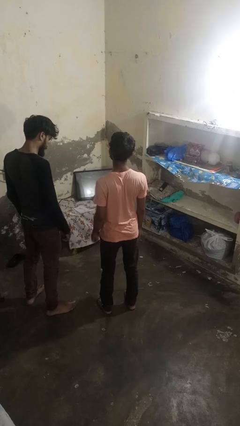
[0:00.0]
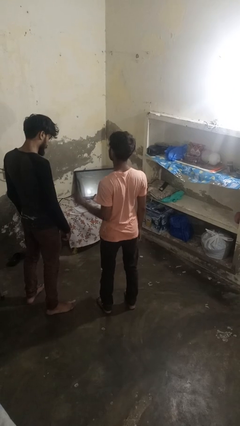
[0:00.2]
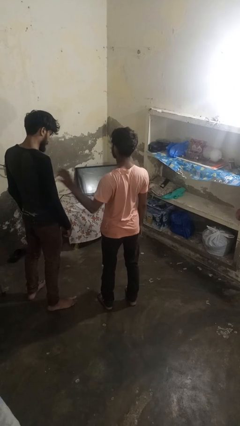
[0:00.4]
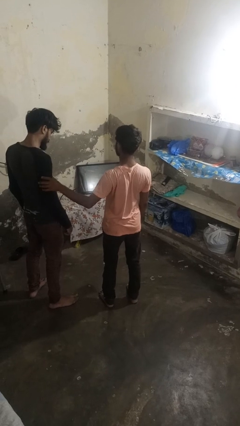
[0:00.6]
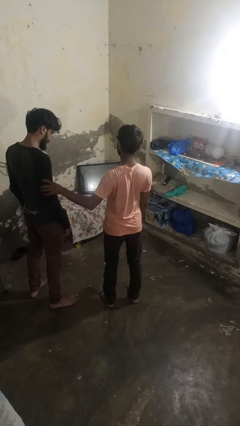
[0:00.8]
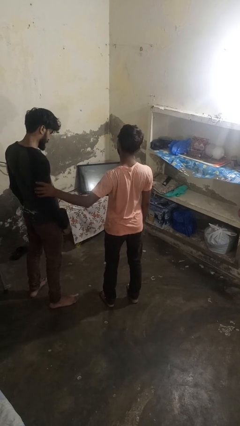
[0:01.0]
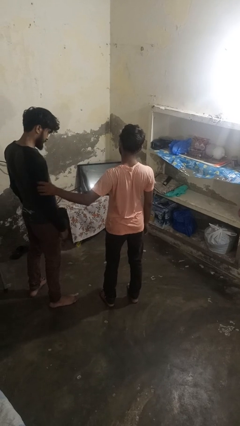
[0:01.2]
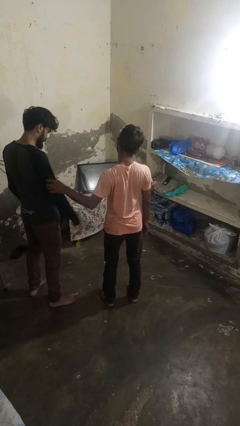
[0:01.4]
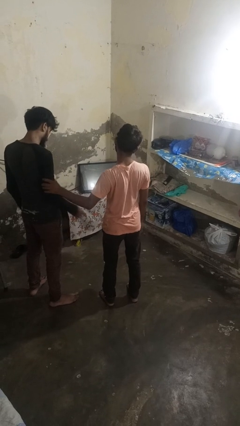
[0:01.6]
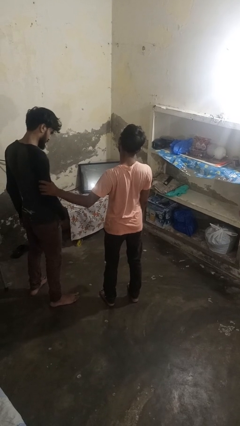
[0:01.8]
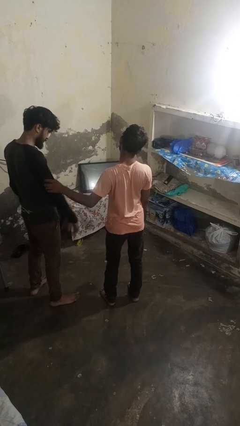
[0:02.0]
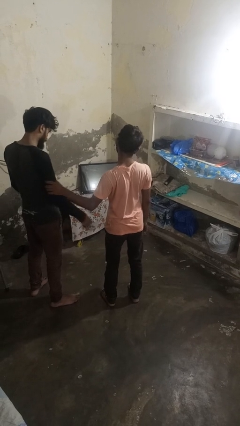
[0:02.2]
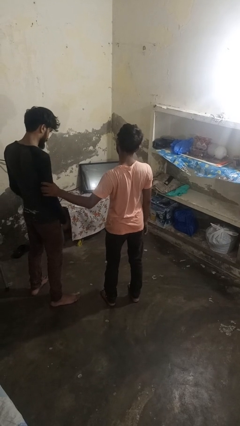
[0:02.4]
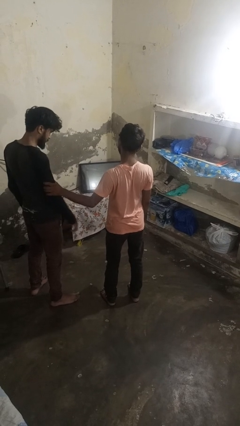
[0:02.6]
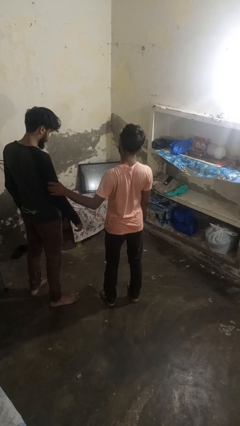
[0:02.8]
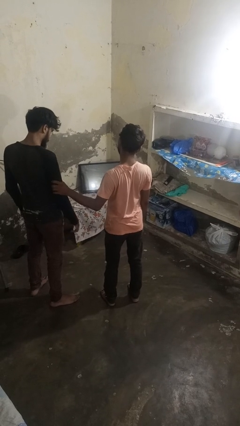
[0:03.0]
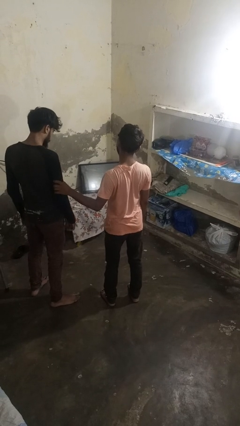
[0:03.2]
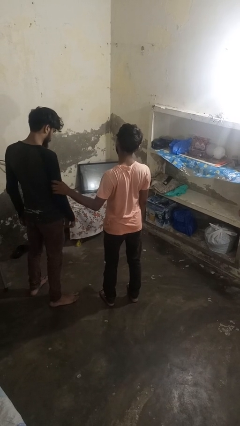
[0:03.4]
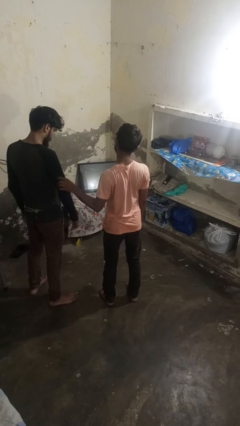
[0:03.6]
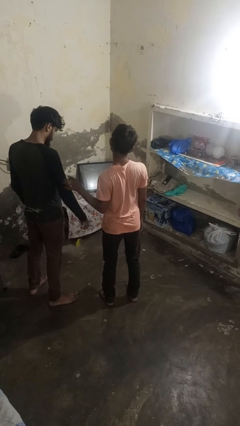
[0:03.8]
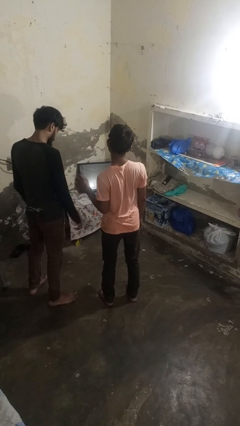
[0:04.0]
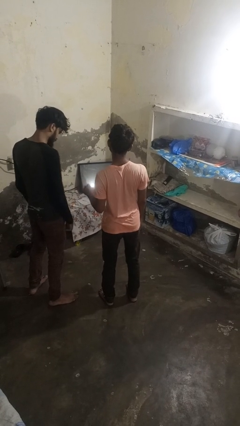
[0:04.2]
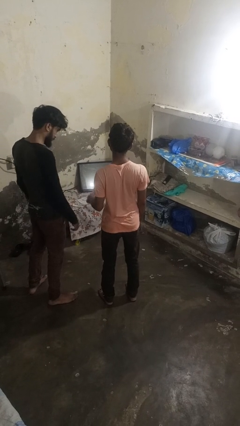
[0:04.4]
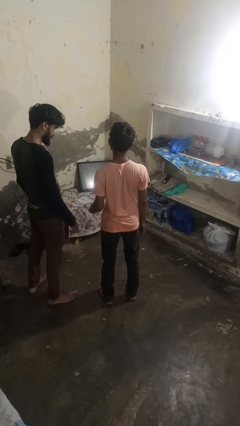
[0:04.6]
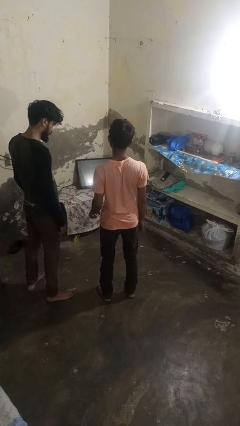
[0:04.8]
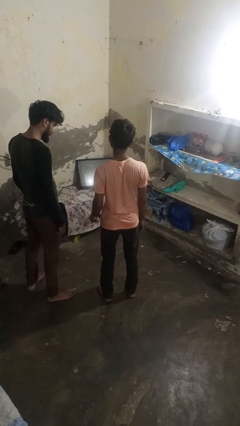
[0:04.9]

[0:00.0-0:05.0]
person grabs person by bicep

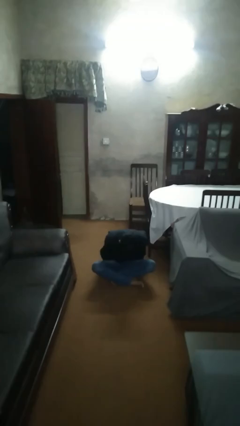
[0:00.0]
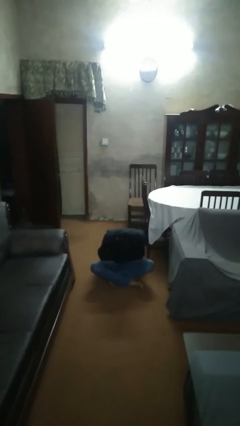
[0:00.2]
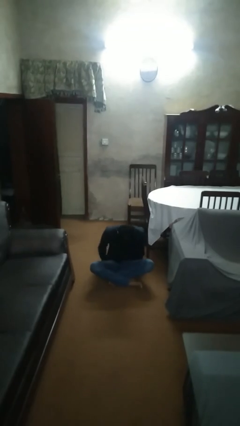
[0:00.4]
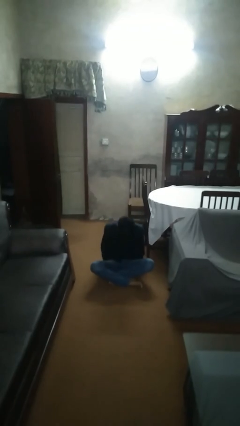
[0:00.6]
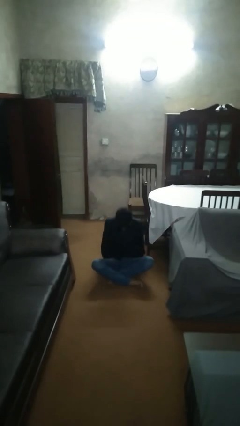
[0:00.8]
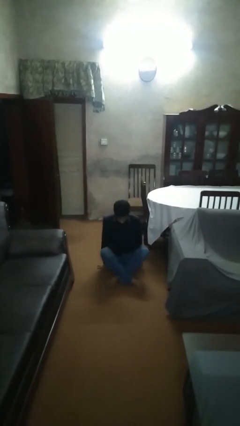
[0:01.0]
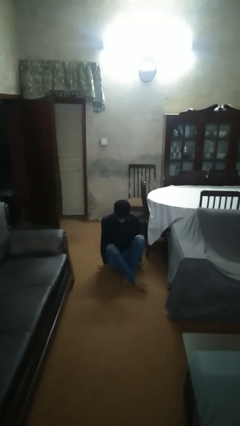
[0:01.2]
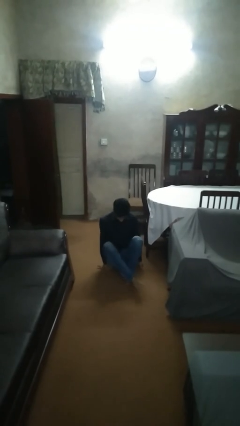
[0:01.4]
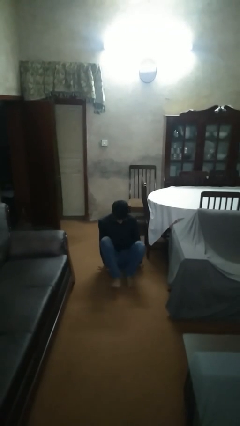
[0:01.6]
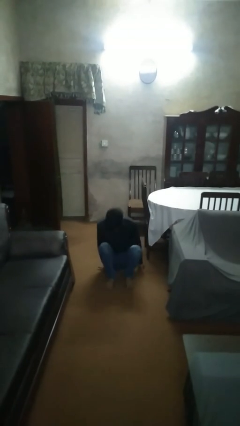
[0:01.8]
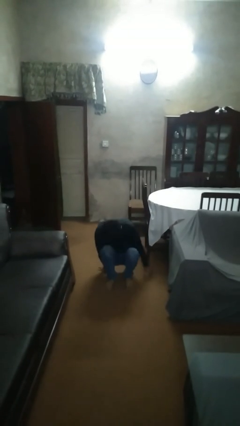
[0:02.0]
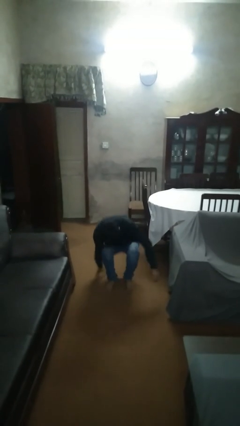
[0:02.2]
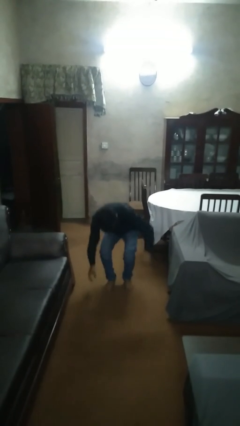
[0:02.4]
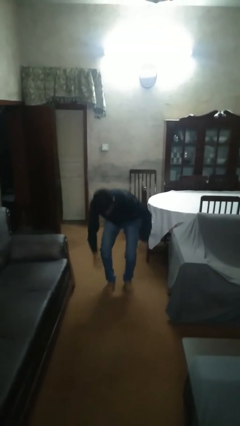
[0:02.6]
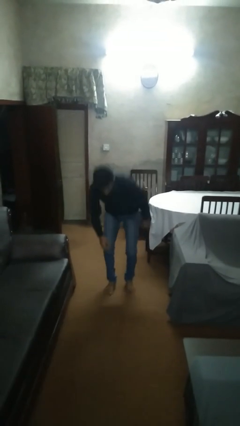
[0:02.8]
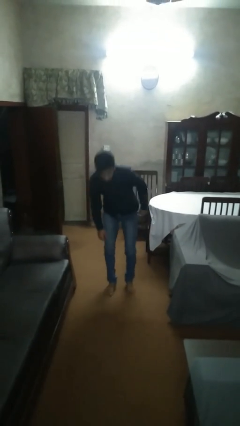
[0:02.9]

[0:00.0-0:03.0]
person stands up from floor

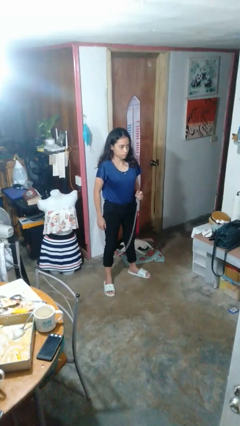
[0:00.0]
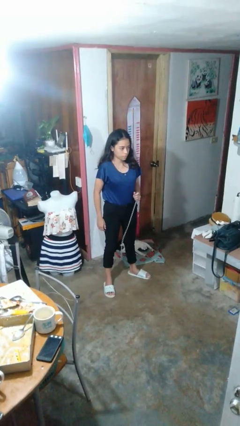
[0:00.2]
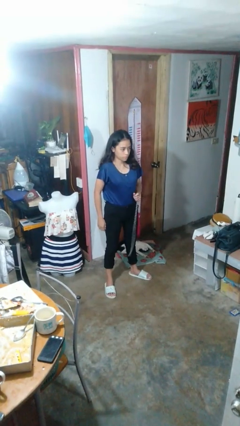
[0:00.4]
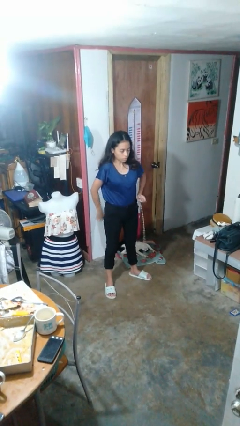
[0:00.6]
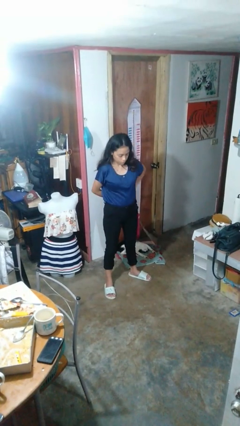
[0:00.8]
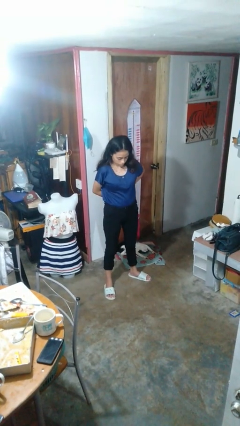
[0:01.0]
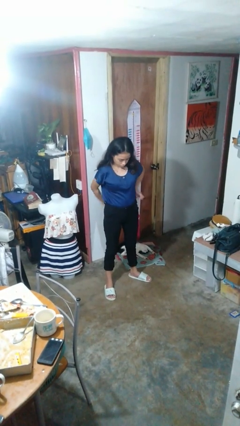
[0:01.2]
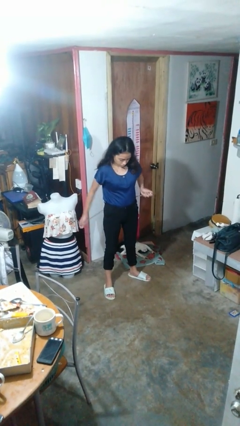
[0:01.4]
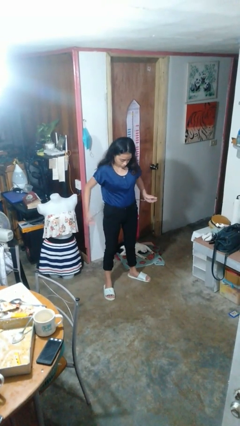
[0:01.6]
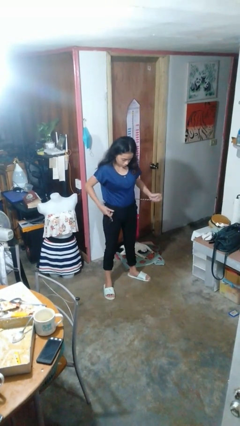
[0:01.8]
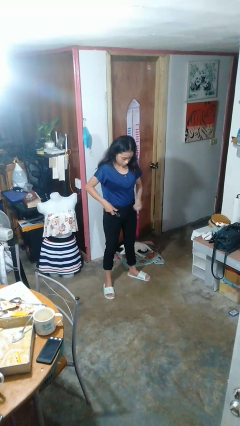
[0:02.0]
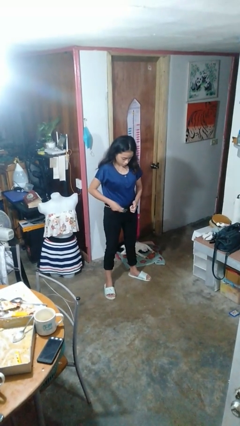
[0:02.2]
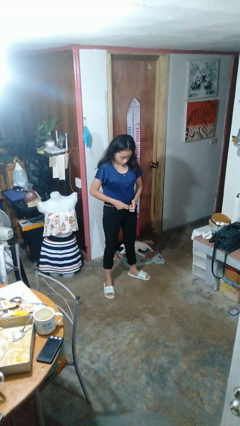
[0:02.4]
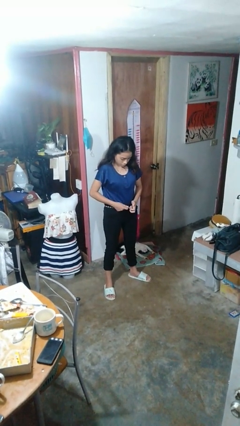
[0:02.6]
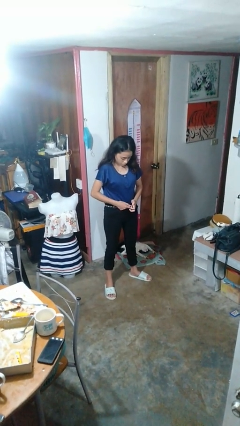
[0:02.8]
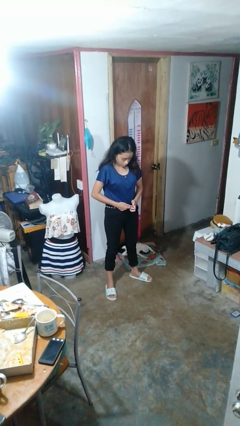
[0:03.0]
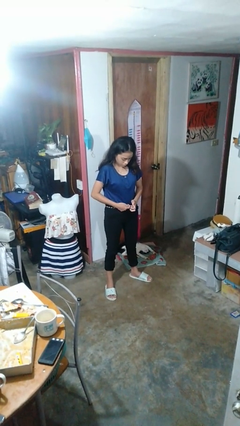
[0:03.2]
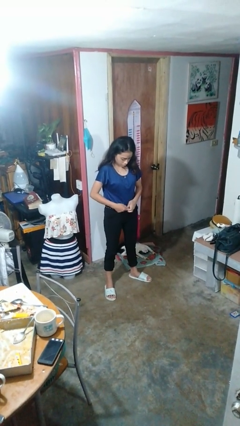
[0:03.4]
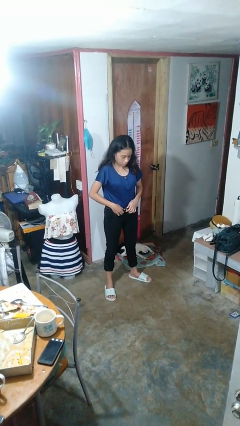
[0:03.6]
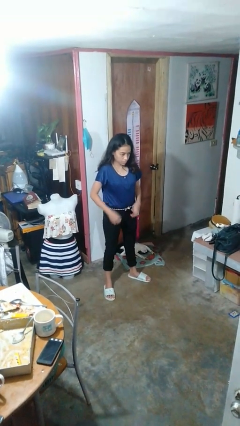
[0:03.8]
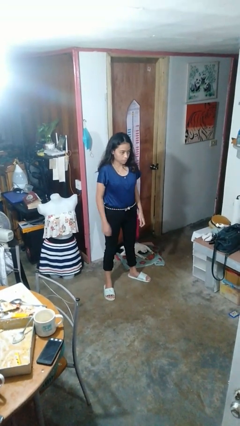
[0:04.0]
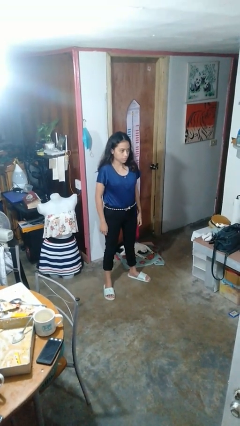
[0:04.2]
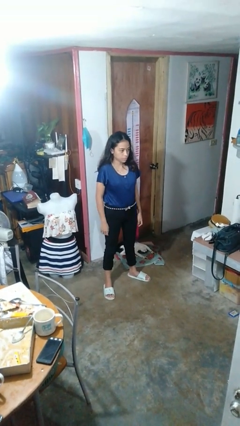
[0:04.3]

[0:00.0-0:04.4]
person puts on belt

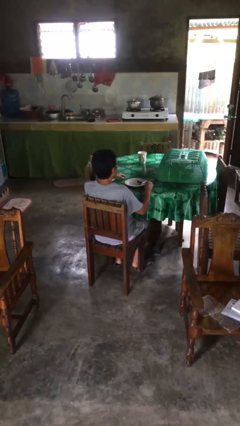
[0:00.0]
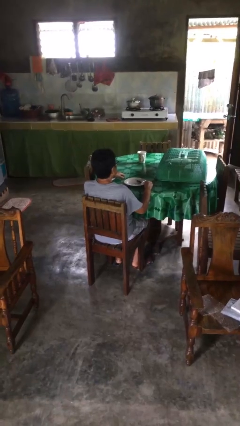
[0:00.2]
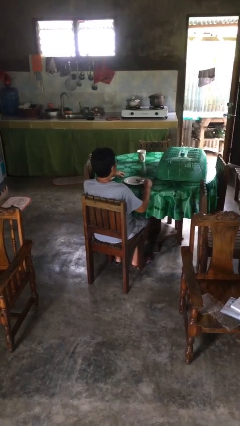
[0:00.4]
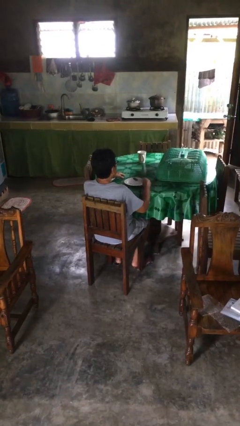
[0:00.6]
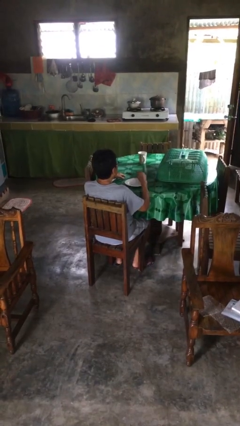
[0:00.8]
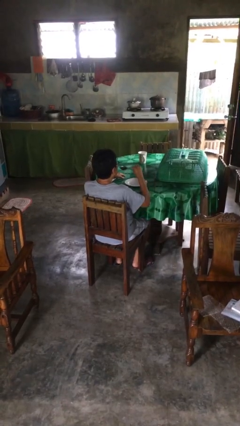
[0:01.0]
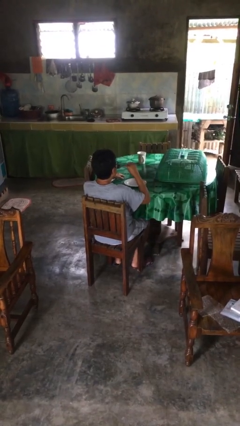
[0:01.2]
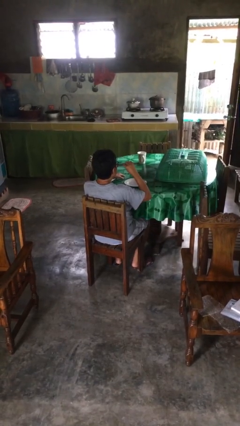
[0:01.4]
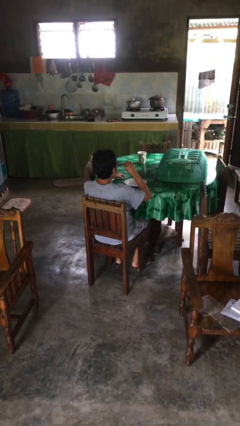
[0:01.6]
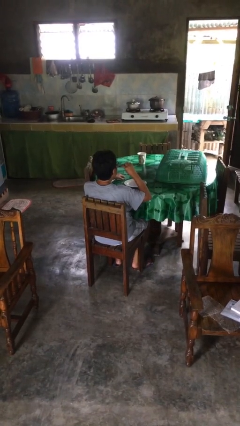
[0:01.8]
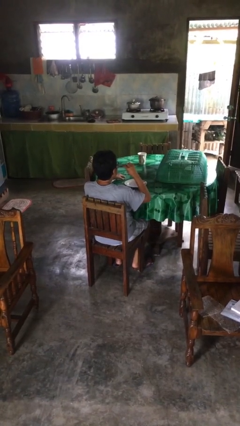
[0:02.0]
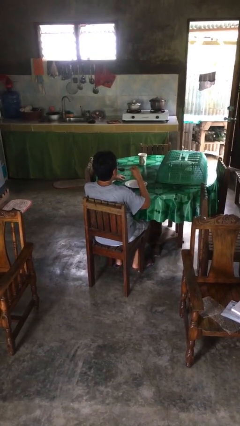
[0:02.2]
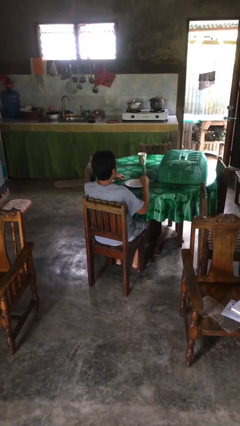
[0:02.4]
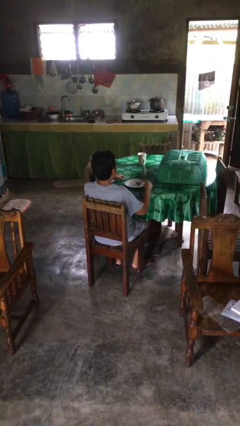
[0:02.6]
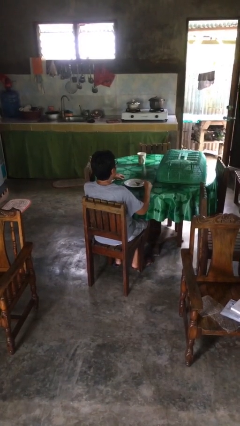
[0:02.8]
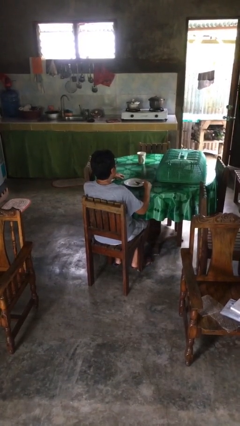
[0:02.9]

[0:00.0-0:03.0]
person eats with utensil

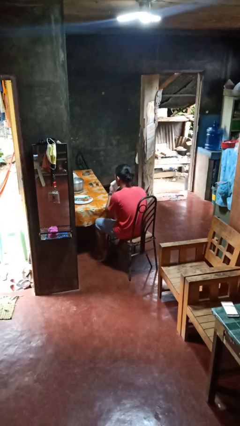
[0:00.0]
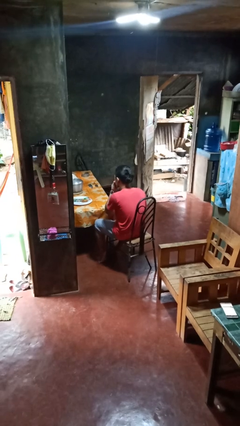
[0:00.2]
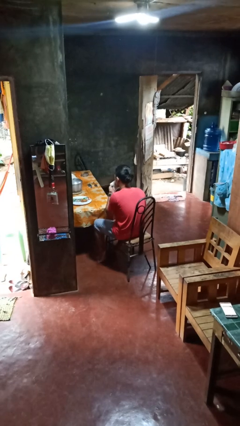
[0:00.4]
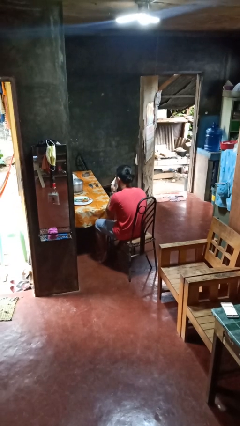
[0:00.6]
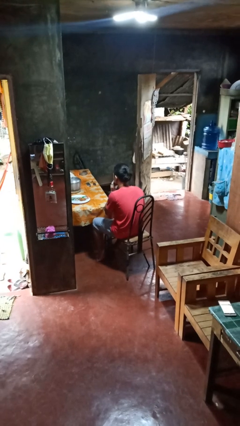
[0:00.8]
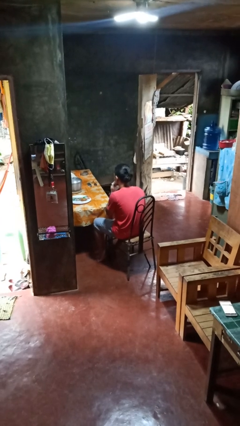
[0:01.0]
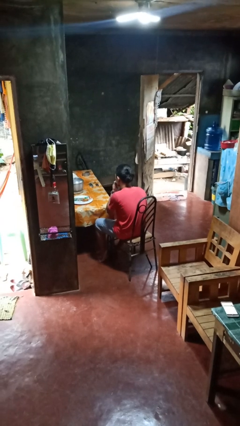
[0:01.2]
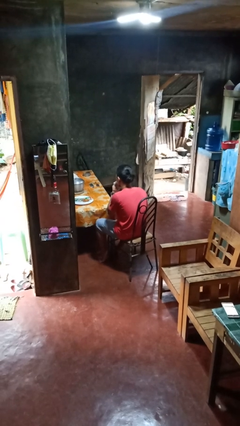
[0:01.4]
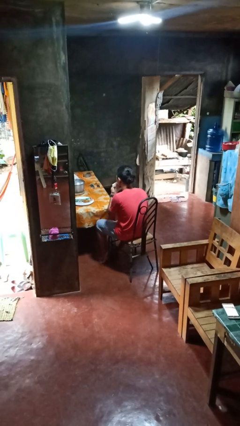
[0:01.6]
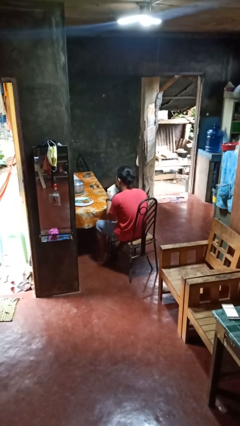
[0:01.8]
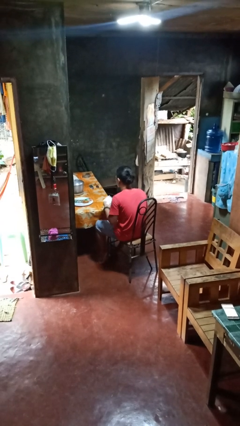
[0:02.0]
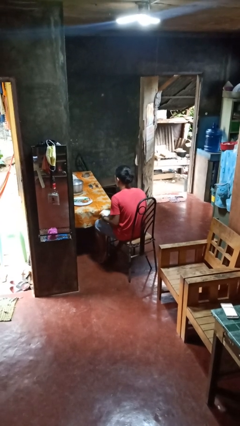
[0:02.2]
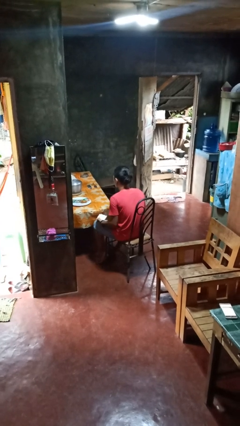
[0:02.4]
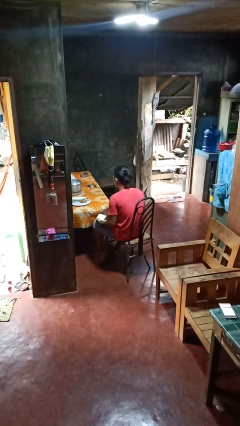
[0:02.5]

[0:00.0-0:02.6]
person wipes mouth with napkin
